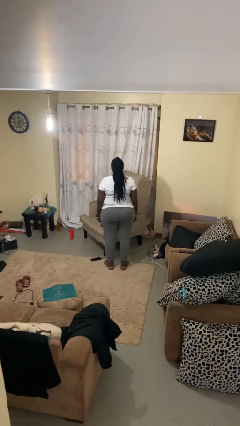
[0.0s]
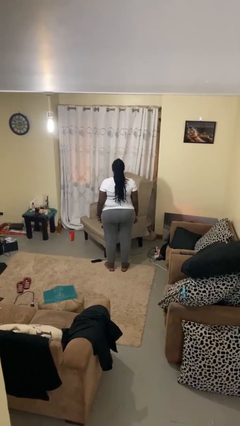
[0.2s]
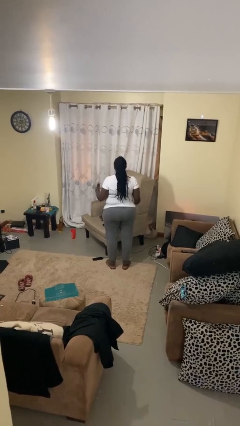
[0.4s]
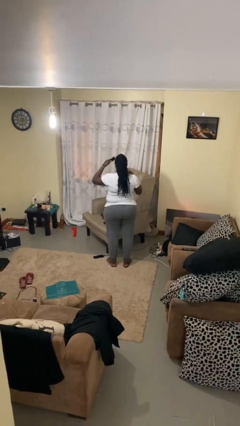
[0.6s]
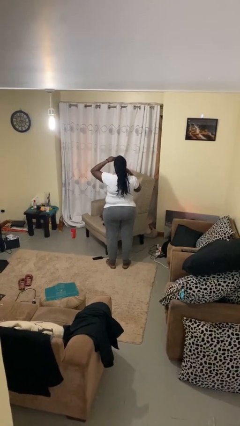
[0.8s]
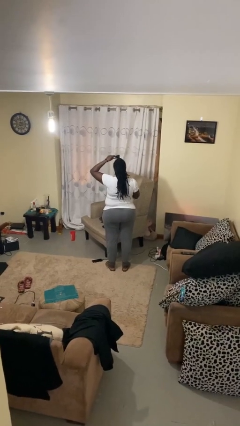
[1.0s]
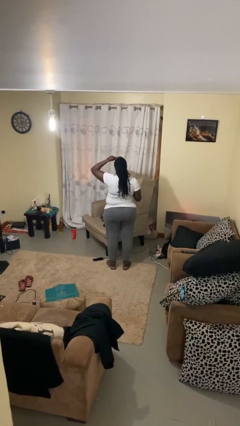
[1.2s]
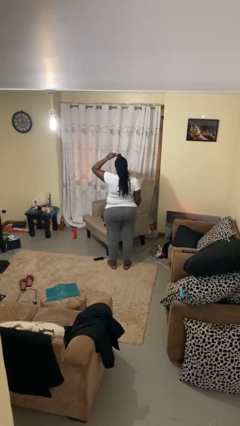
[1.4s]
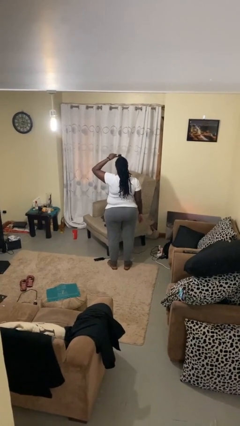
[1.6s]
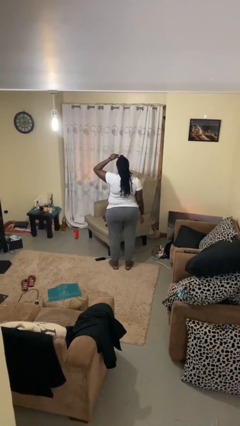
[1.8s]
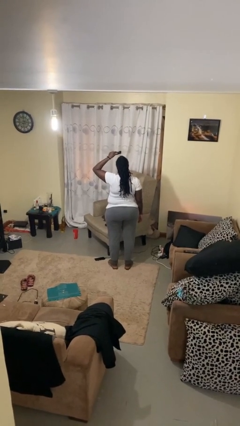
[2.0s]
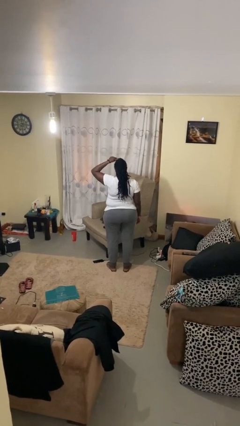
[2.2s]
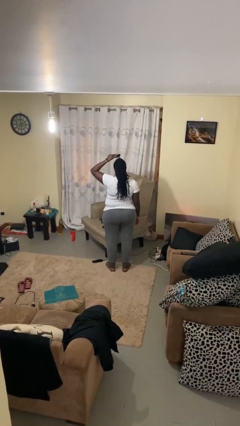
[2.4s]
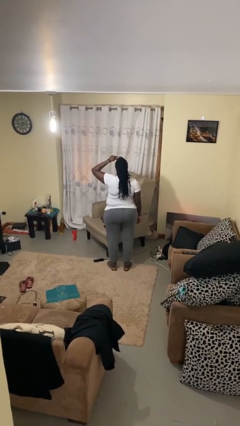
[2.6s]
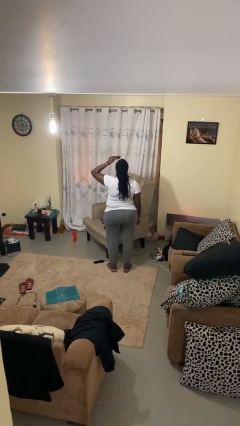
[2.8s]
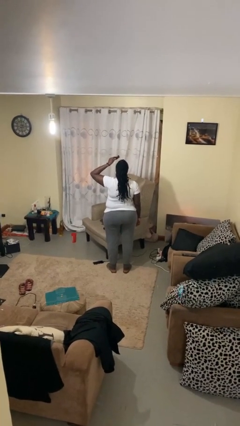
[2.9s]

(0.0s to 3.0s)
person brushes hair

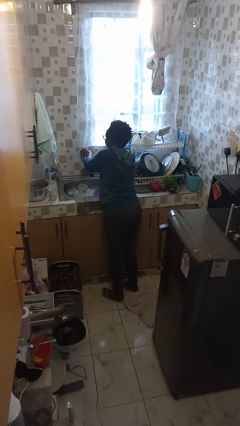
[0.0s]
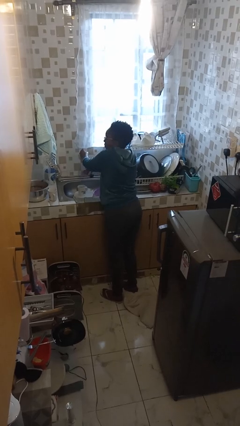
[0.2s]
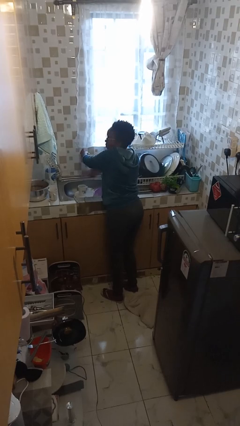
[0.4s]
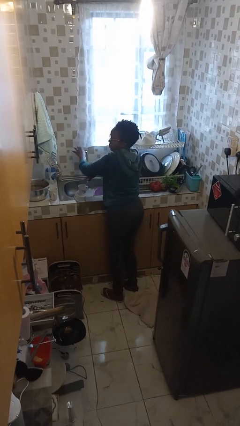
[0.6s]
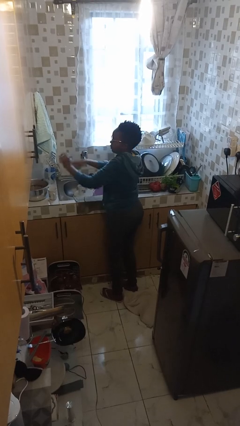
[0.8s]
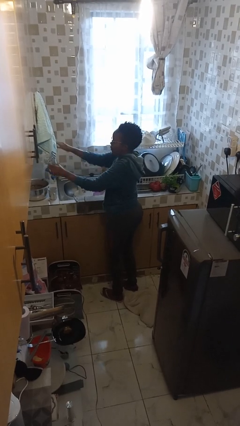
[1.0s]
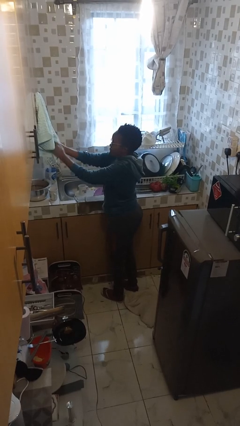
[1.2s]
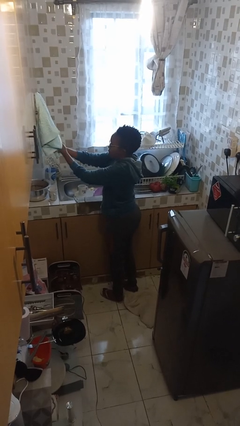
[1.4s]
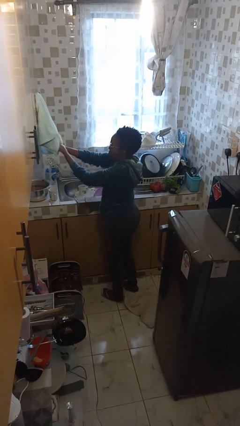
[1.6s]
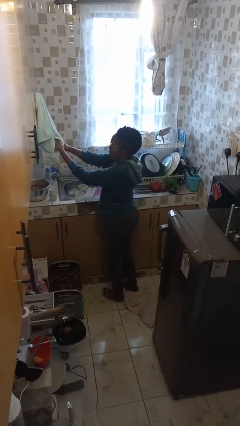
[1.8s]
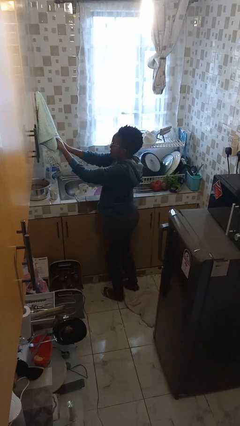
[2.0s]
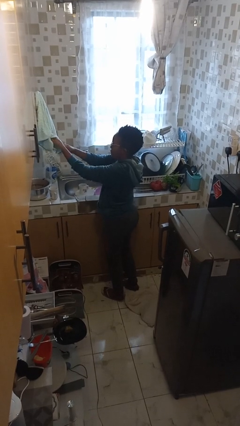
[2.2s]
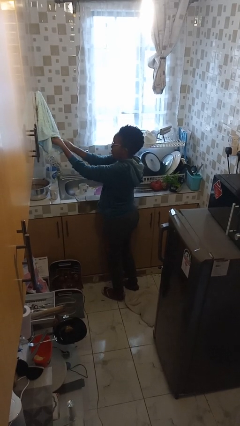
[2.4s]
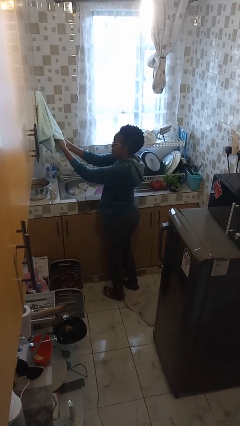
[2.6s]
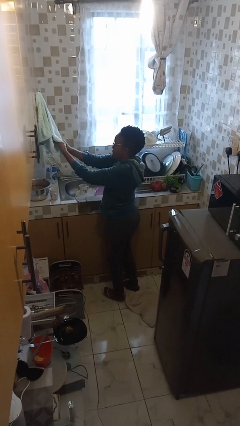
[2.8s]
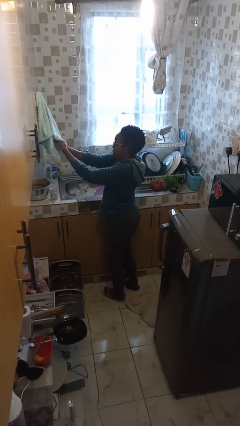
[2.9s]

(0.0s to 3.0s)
person dries hands with towel

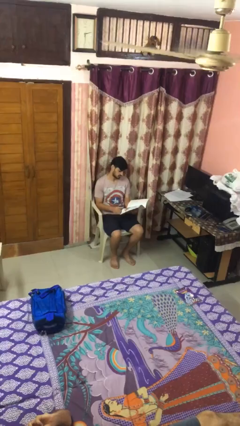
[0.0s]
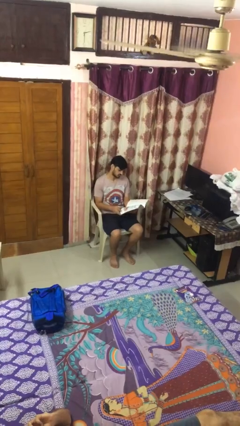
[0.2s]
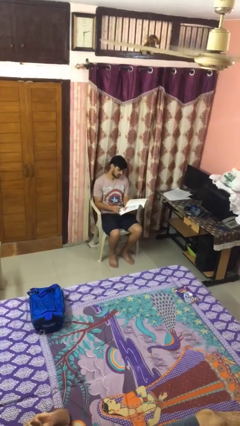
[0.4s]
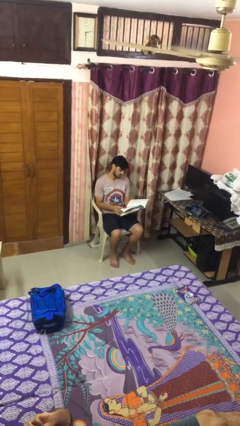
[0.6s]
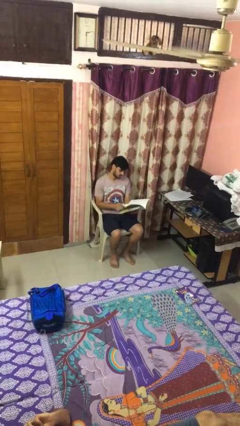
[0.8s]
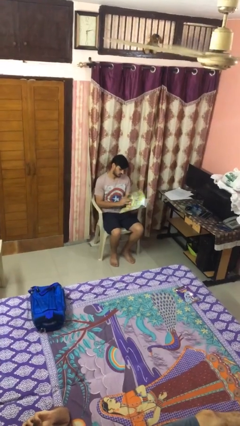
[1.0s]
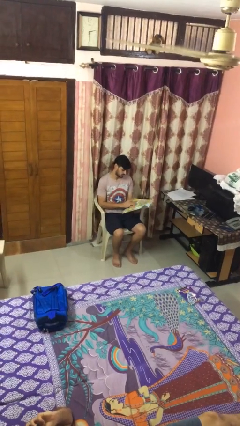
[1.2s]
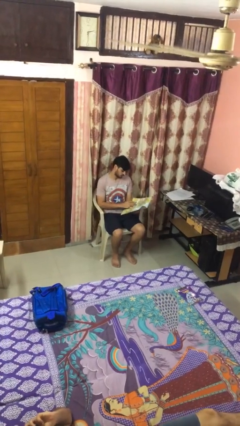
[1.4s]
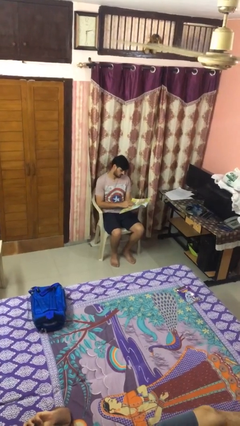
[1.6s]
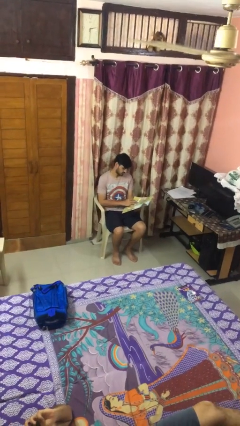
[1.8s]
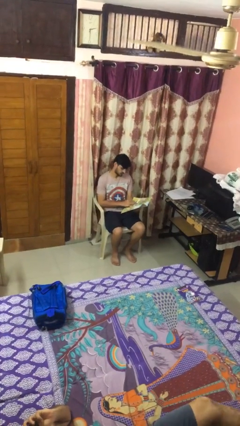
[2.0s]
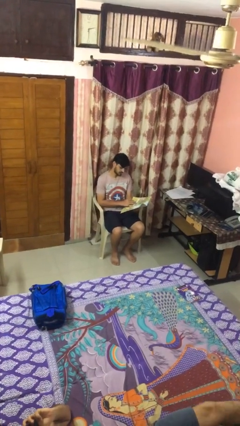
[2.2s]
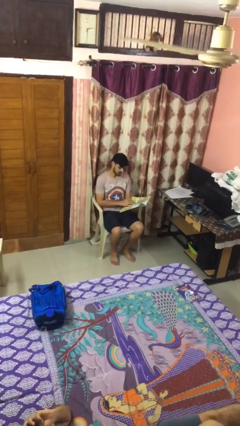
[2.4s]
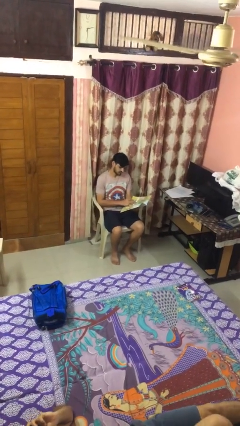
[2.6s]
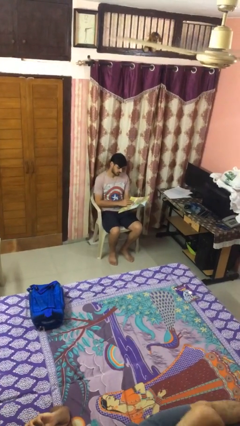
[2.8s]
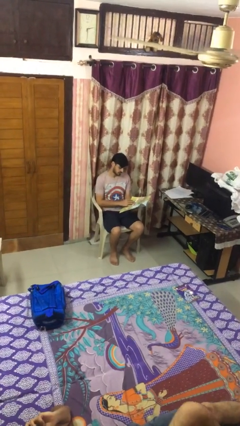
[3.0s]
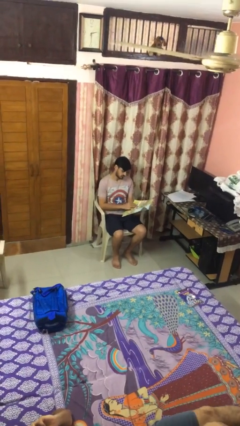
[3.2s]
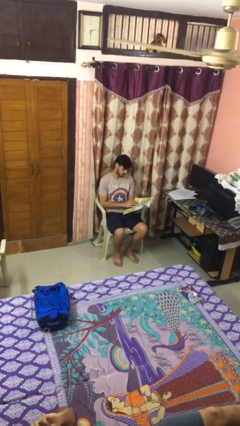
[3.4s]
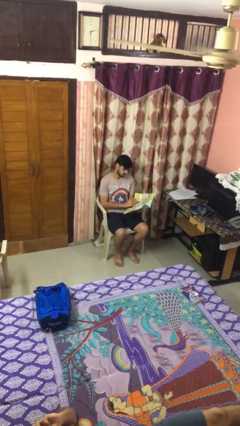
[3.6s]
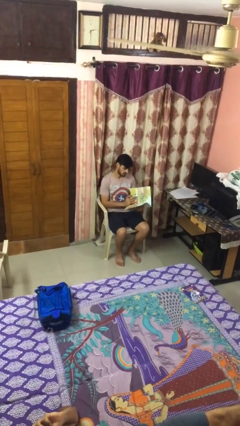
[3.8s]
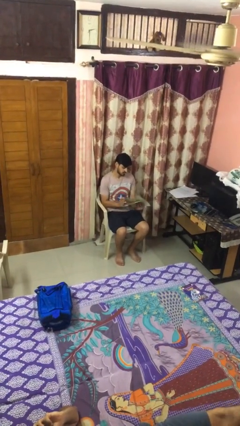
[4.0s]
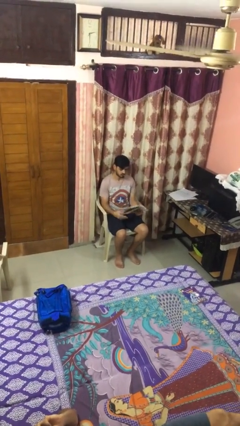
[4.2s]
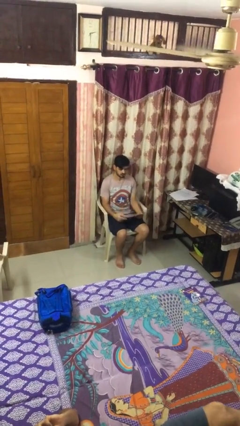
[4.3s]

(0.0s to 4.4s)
person reads magazine

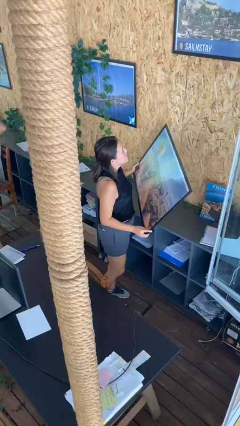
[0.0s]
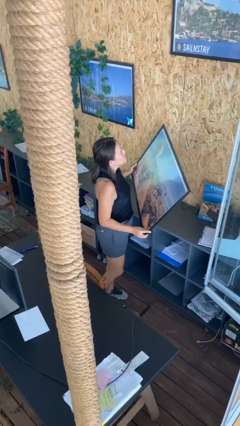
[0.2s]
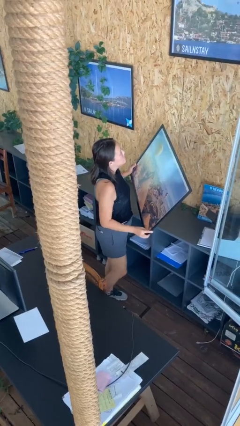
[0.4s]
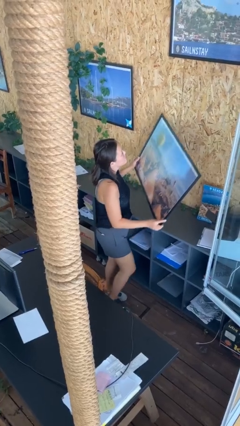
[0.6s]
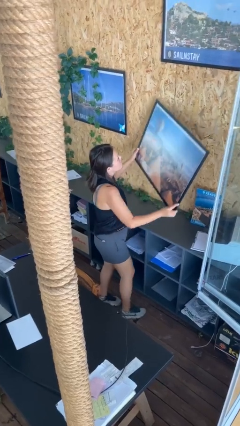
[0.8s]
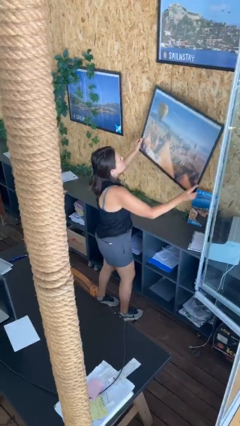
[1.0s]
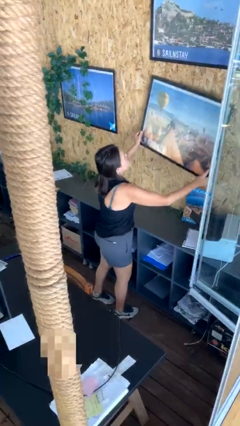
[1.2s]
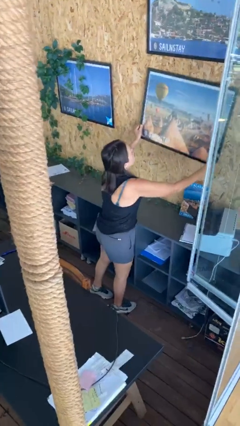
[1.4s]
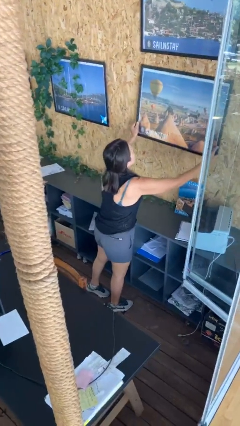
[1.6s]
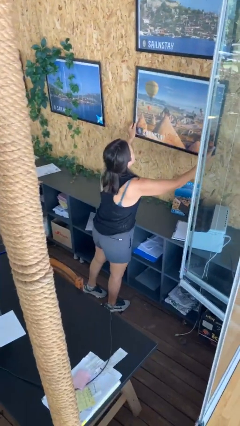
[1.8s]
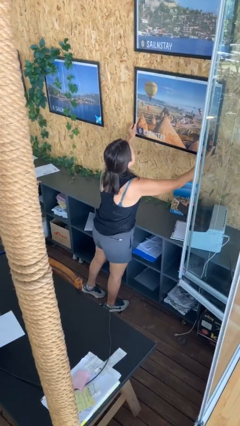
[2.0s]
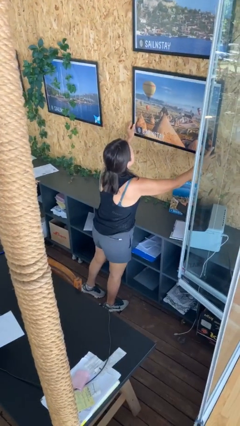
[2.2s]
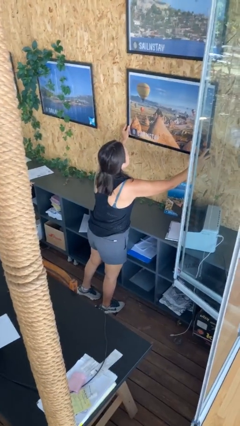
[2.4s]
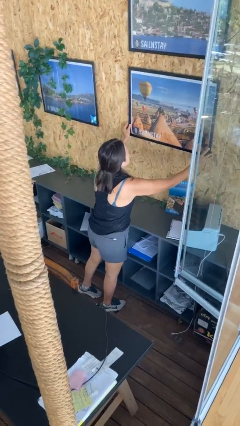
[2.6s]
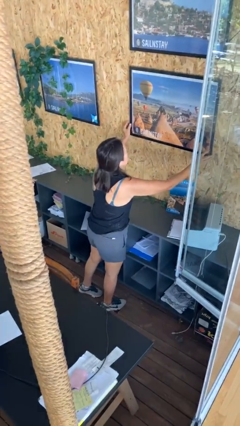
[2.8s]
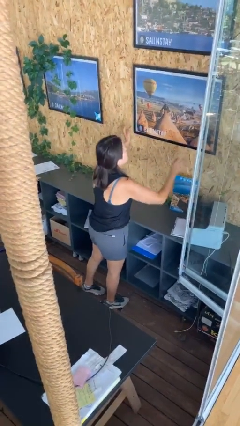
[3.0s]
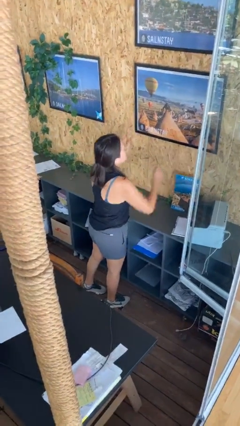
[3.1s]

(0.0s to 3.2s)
person puts up picture frame

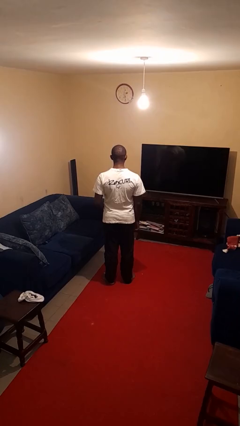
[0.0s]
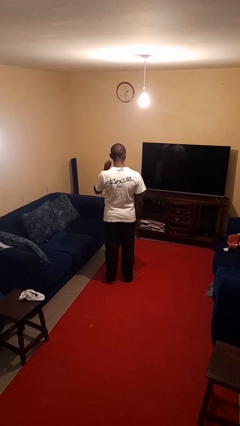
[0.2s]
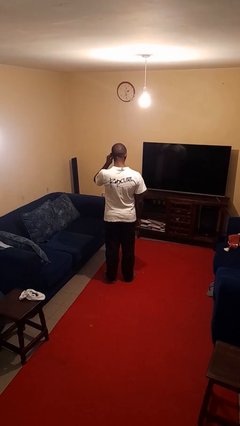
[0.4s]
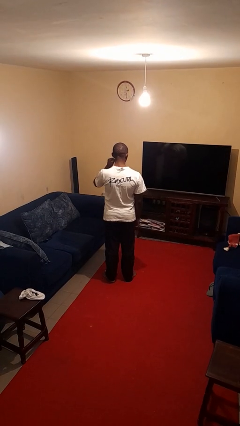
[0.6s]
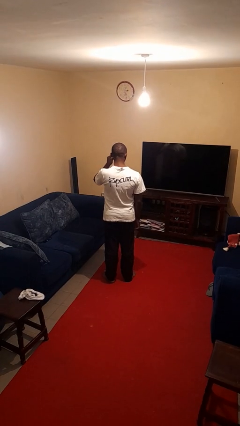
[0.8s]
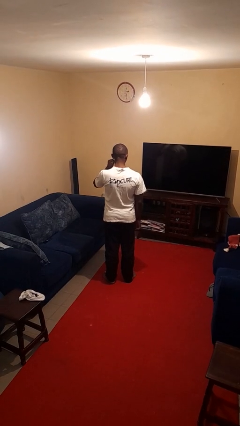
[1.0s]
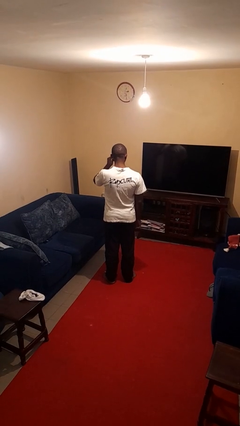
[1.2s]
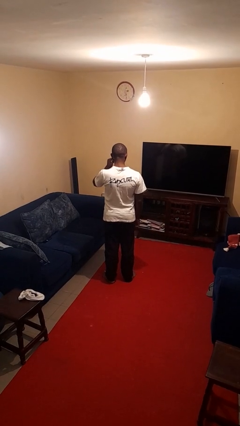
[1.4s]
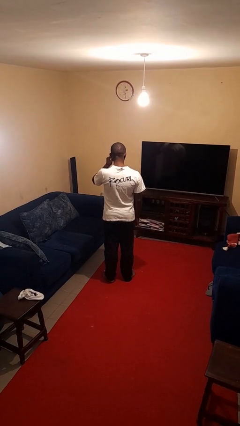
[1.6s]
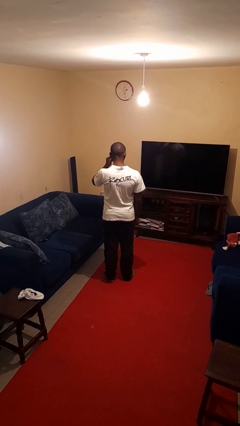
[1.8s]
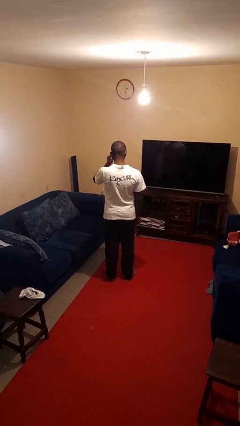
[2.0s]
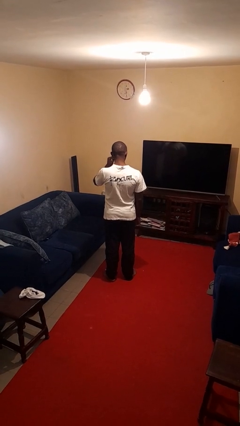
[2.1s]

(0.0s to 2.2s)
person touches earlobe

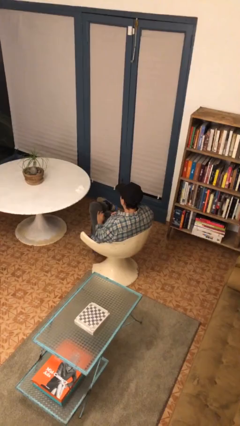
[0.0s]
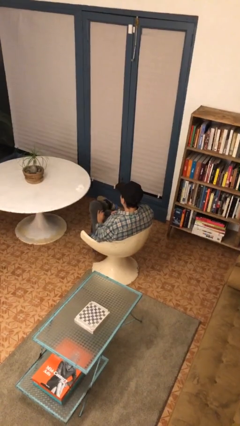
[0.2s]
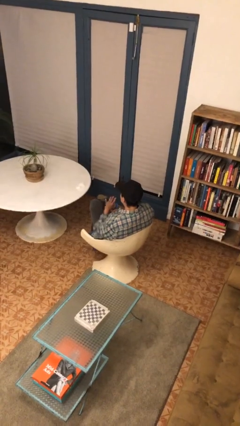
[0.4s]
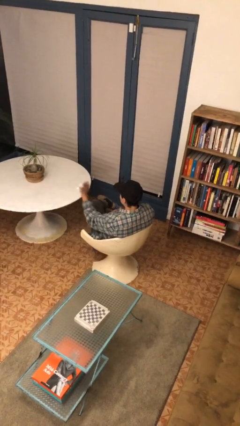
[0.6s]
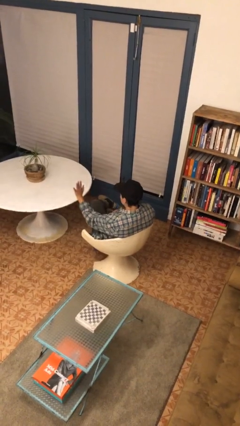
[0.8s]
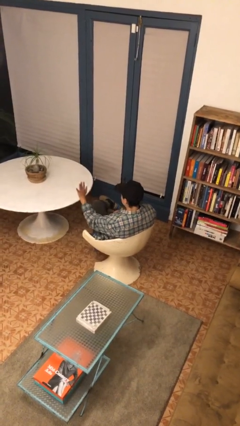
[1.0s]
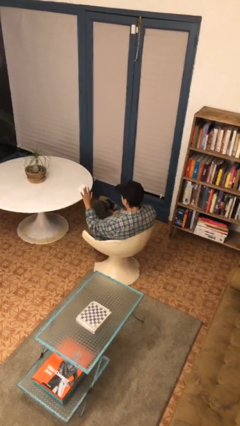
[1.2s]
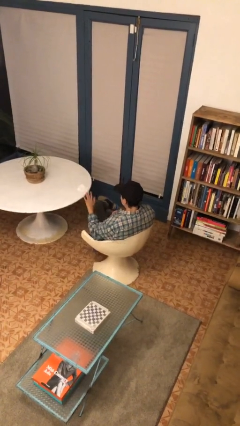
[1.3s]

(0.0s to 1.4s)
person gestures stop
